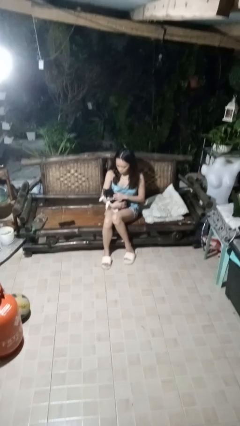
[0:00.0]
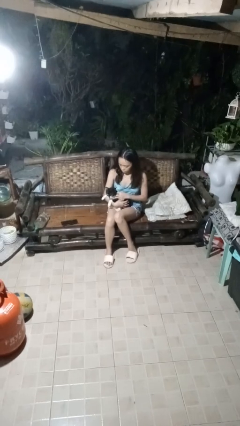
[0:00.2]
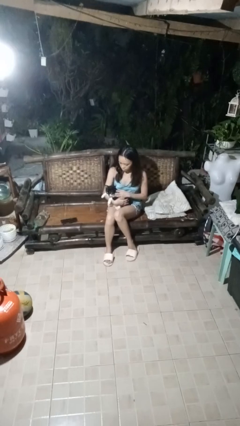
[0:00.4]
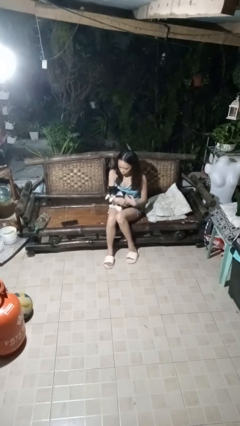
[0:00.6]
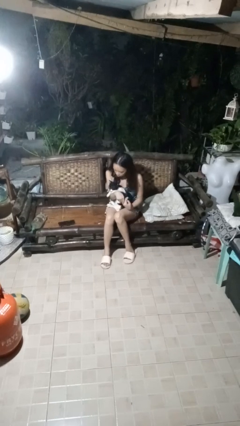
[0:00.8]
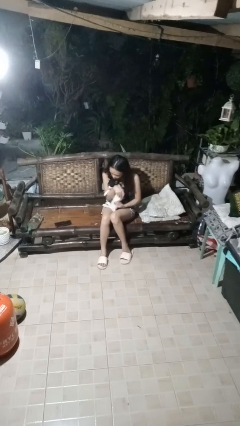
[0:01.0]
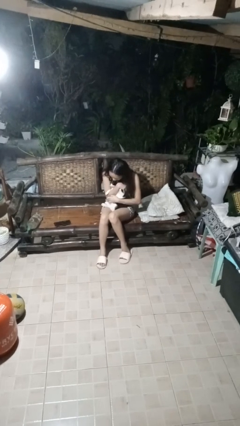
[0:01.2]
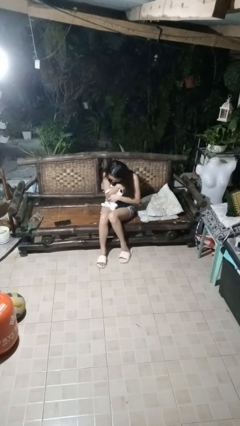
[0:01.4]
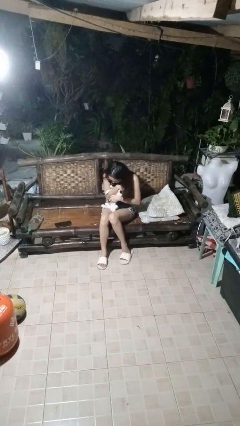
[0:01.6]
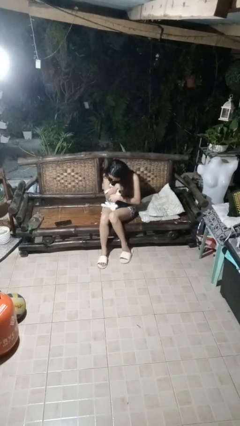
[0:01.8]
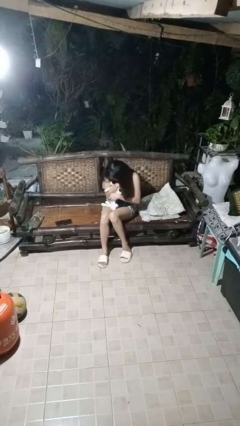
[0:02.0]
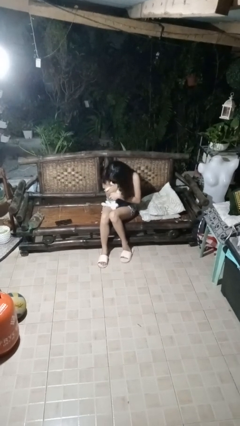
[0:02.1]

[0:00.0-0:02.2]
person hugs cat

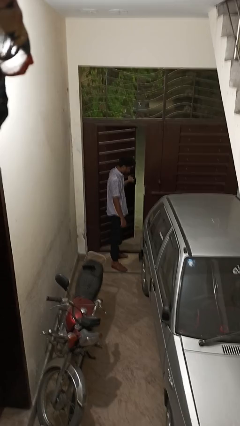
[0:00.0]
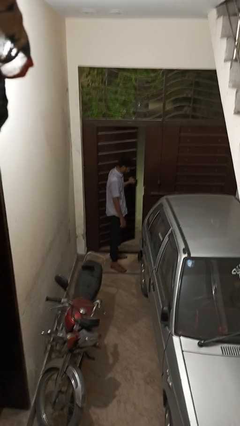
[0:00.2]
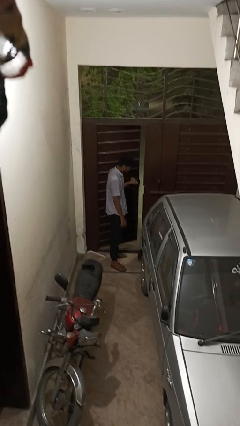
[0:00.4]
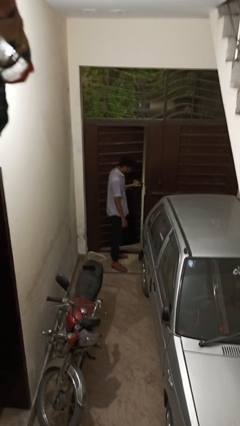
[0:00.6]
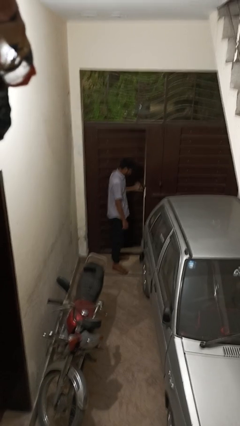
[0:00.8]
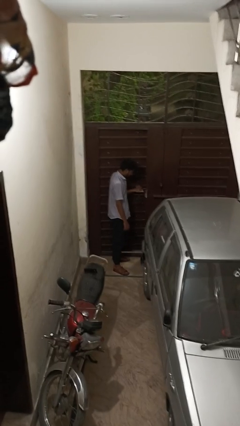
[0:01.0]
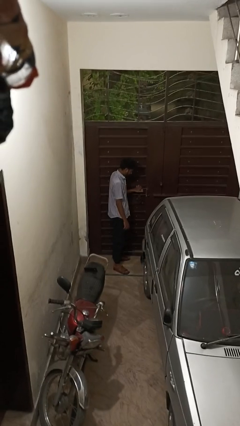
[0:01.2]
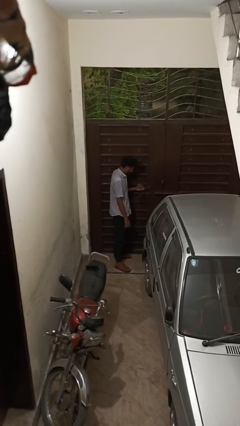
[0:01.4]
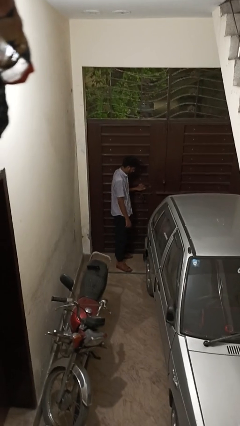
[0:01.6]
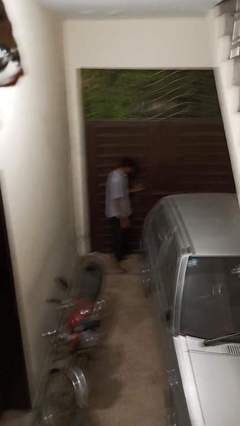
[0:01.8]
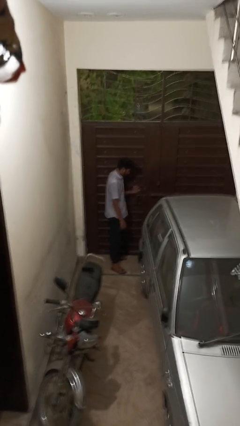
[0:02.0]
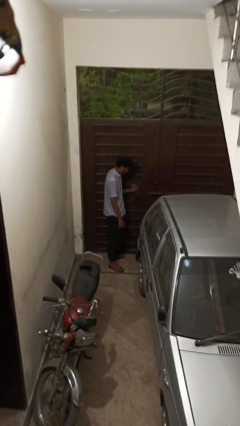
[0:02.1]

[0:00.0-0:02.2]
person closes gate

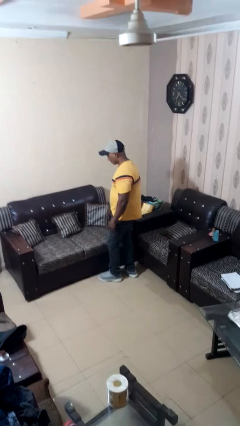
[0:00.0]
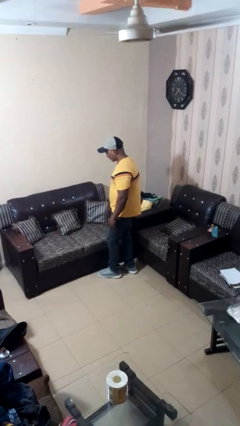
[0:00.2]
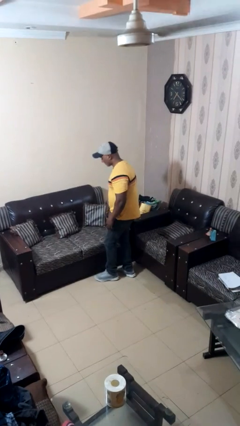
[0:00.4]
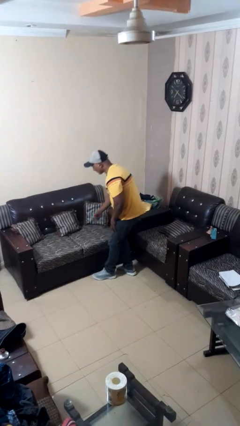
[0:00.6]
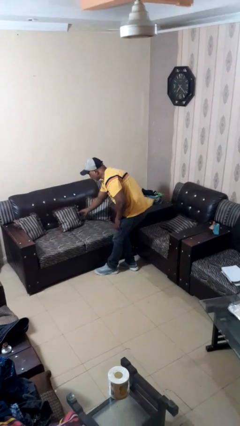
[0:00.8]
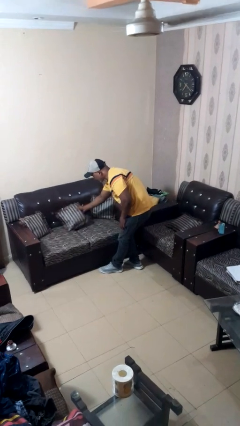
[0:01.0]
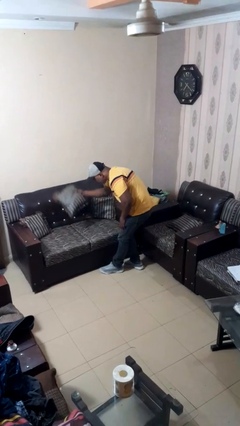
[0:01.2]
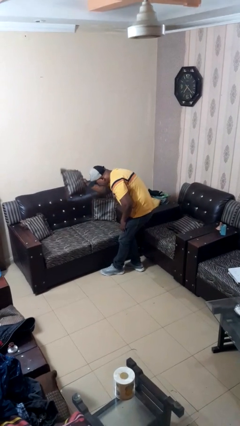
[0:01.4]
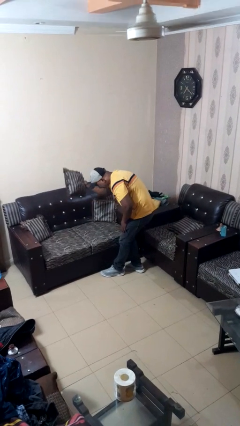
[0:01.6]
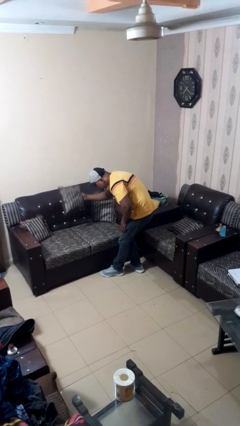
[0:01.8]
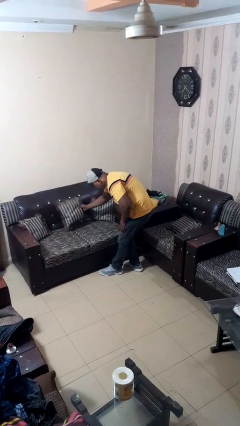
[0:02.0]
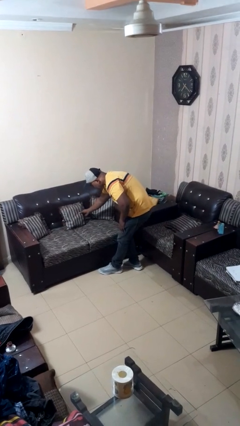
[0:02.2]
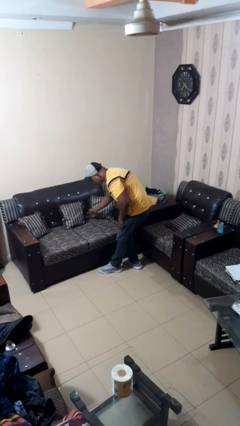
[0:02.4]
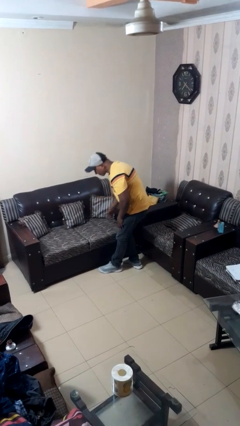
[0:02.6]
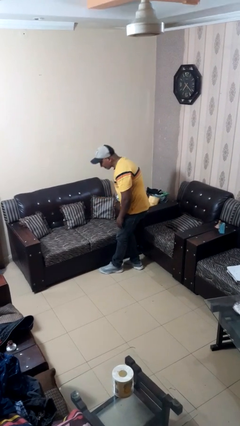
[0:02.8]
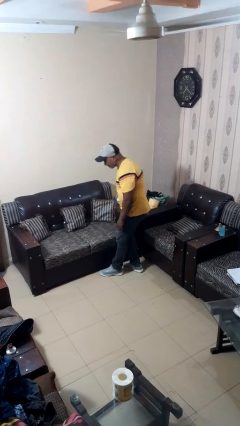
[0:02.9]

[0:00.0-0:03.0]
person searches in couch

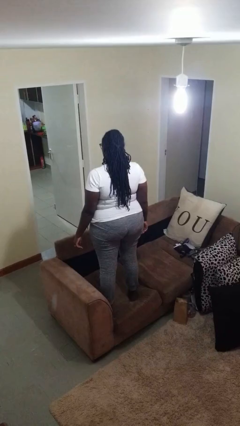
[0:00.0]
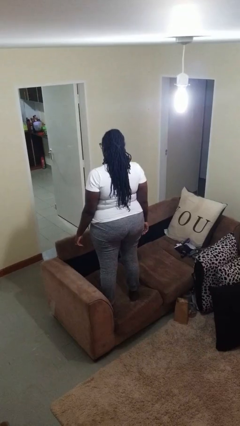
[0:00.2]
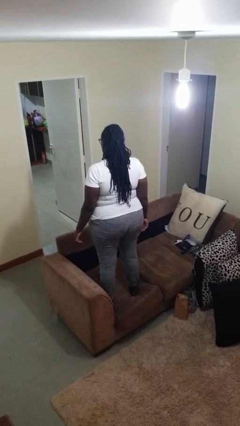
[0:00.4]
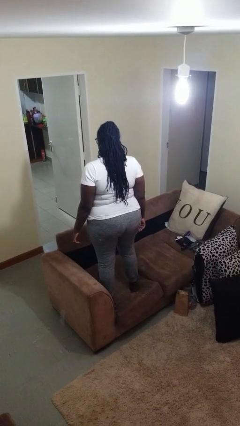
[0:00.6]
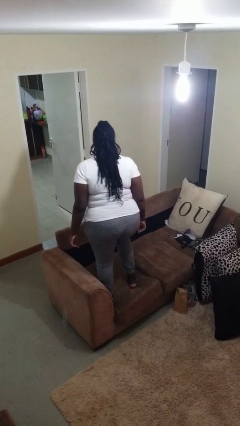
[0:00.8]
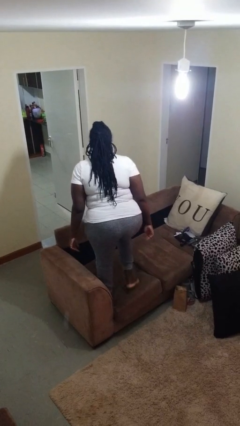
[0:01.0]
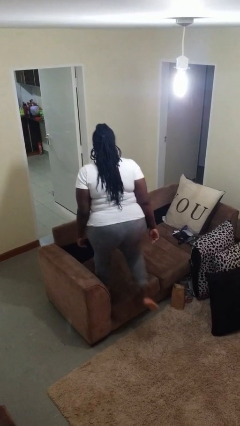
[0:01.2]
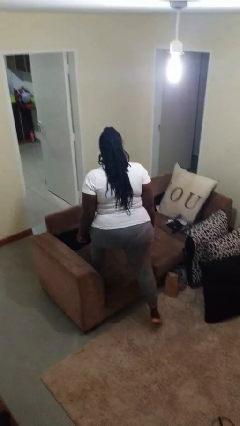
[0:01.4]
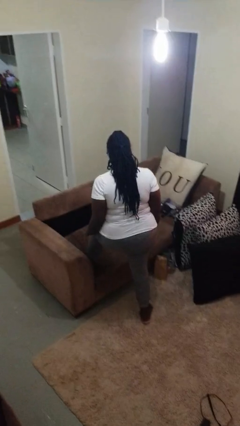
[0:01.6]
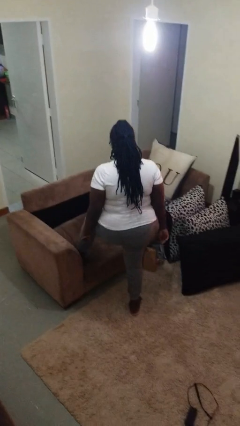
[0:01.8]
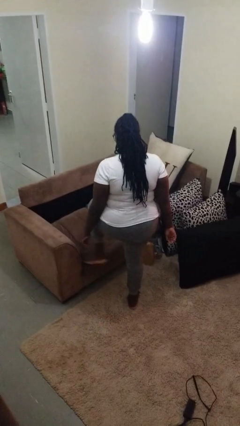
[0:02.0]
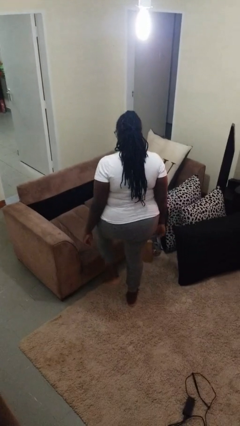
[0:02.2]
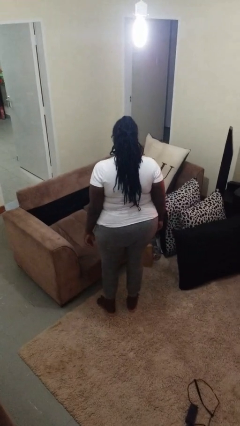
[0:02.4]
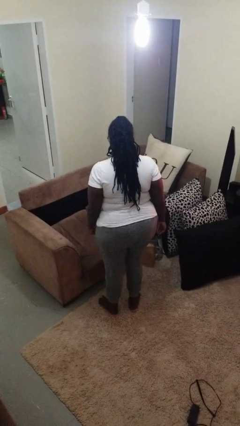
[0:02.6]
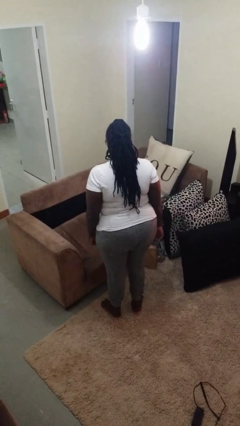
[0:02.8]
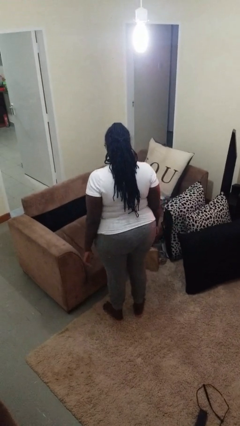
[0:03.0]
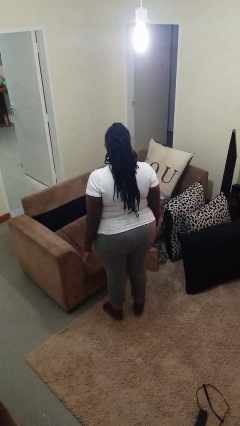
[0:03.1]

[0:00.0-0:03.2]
person climbs off couch

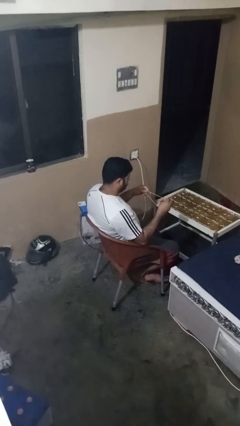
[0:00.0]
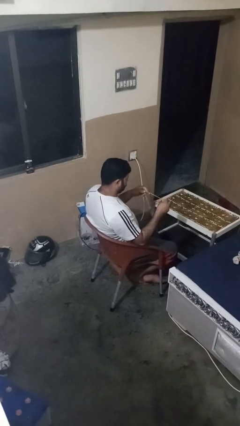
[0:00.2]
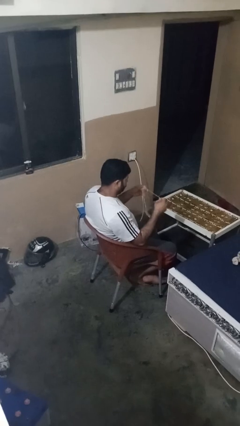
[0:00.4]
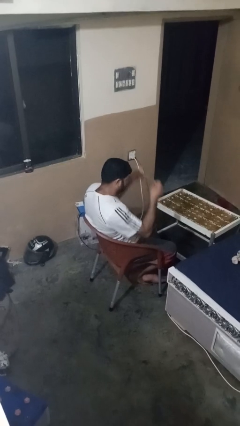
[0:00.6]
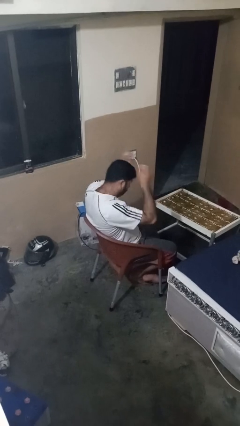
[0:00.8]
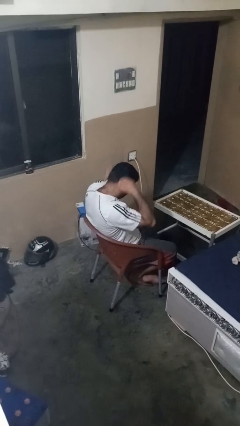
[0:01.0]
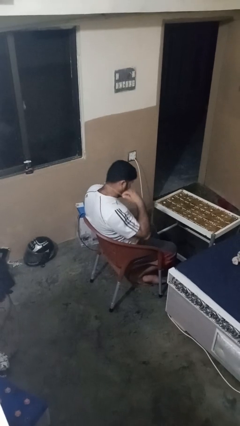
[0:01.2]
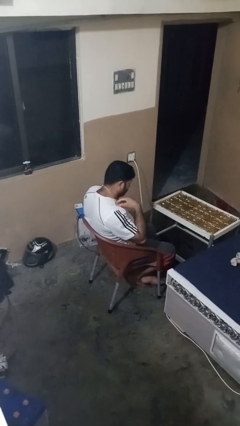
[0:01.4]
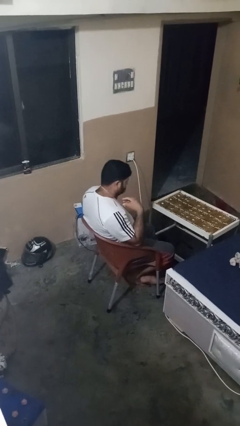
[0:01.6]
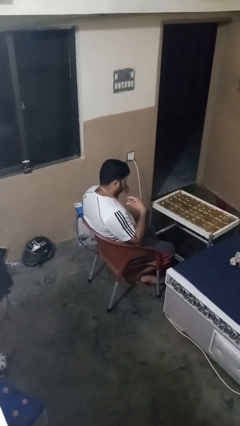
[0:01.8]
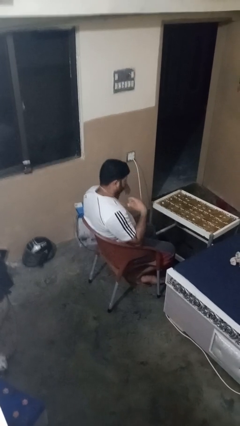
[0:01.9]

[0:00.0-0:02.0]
person puts on necklace

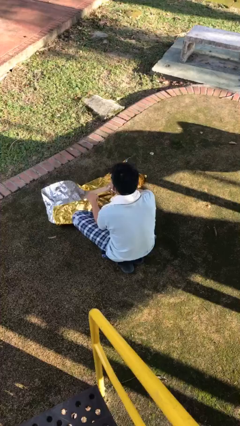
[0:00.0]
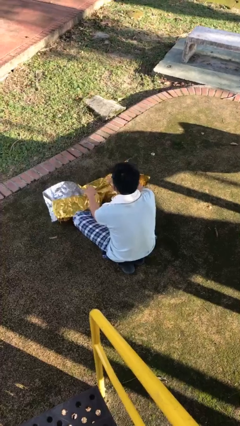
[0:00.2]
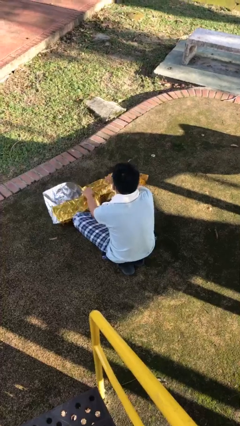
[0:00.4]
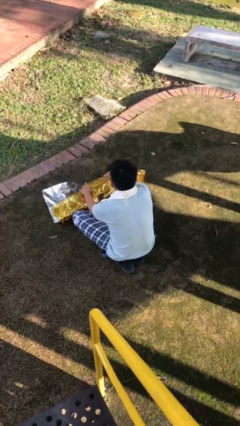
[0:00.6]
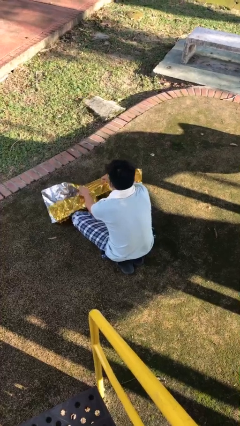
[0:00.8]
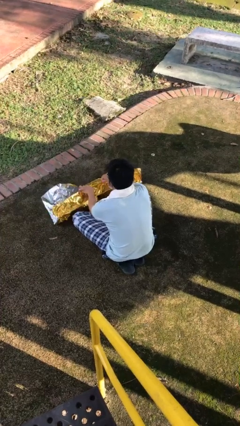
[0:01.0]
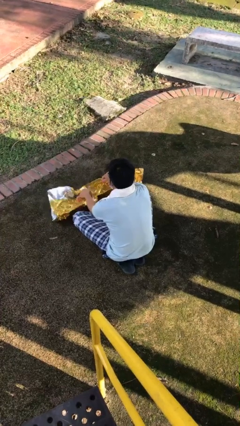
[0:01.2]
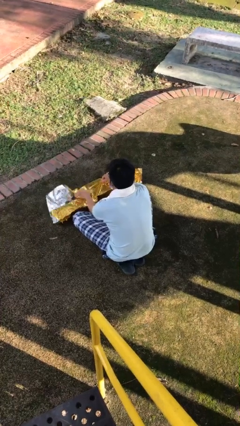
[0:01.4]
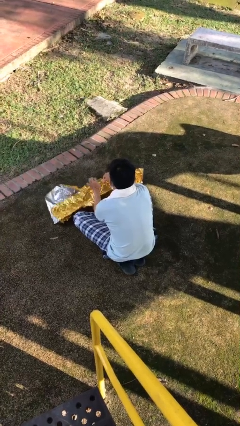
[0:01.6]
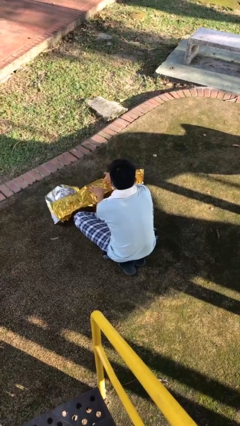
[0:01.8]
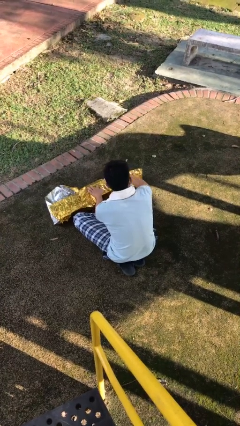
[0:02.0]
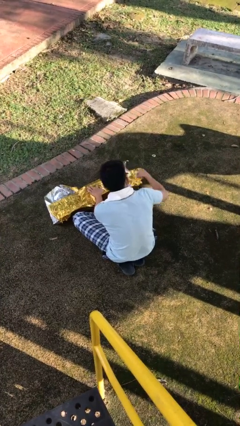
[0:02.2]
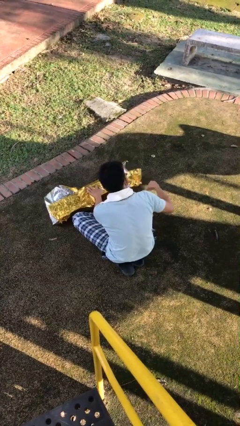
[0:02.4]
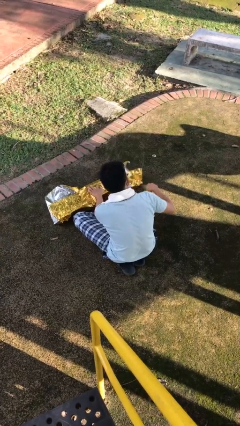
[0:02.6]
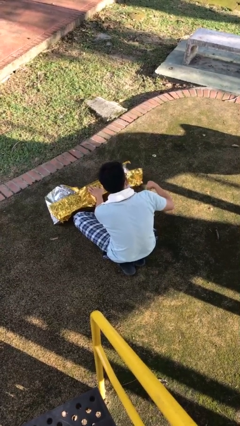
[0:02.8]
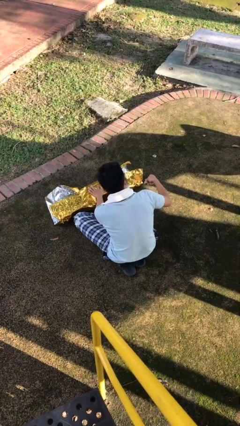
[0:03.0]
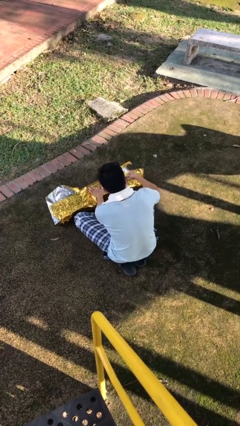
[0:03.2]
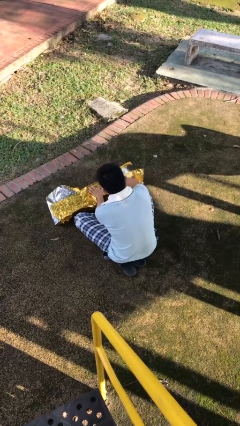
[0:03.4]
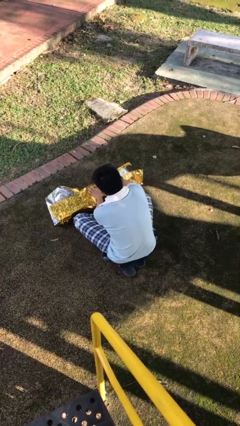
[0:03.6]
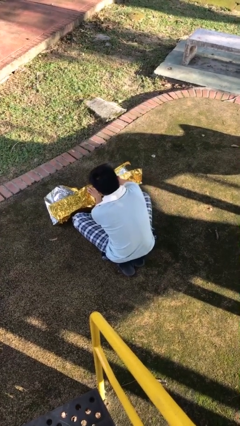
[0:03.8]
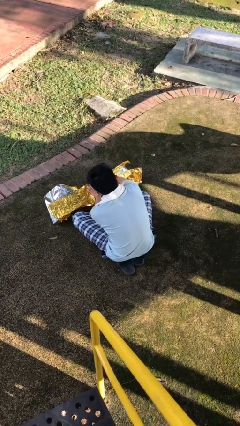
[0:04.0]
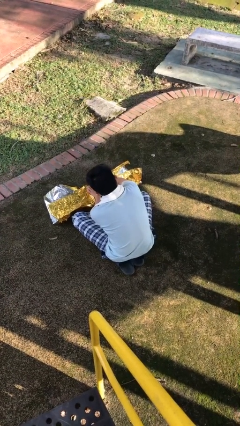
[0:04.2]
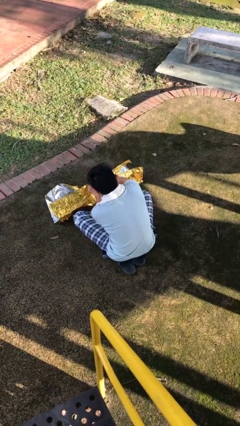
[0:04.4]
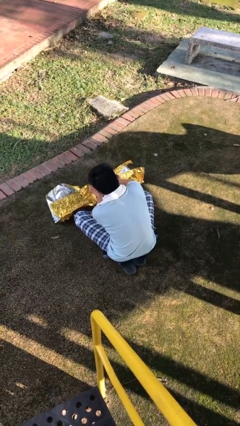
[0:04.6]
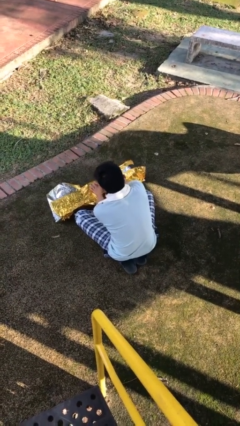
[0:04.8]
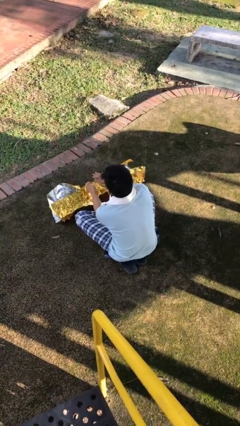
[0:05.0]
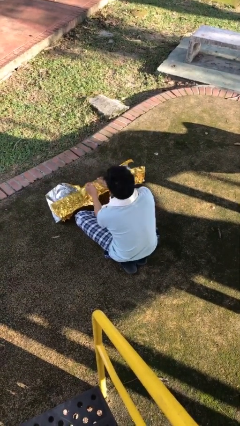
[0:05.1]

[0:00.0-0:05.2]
person wraps box
